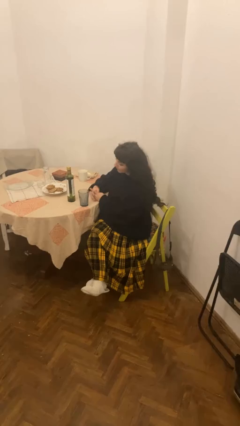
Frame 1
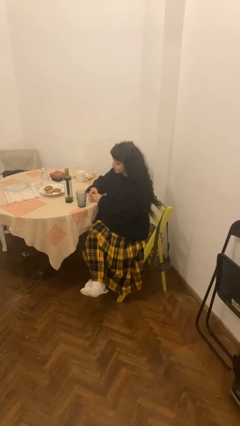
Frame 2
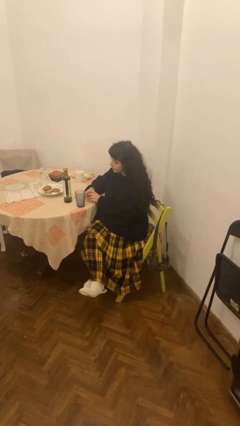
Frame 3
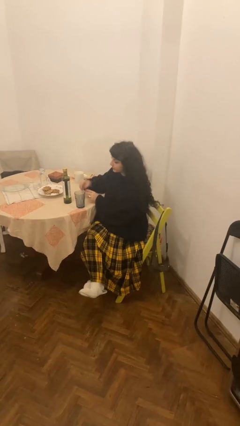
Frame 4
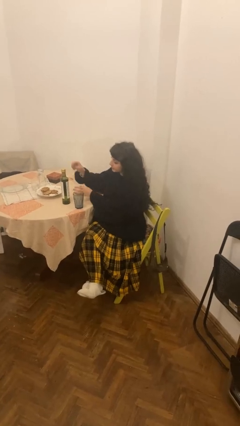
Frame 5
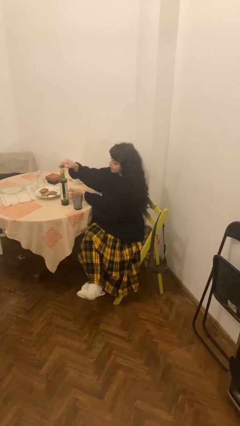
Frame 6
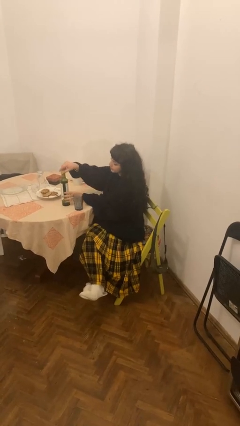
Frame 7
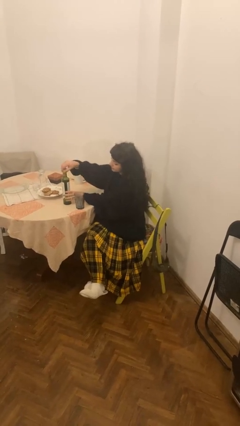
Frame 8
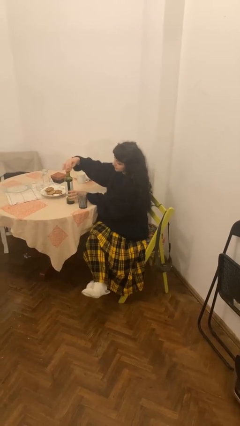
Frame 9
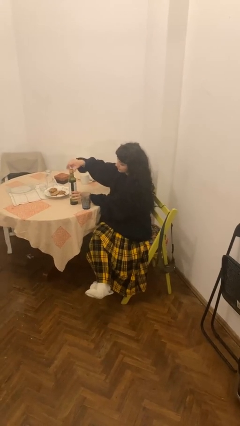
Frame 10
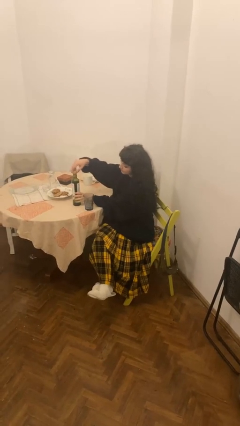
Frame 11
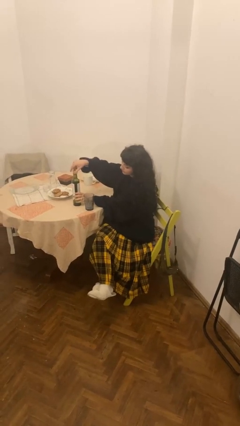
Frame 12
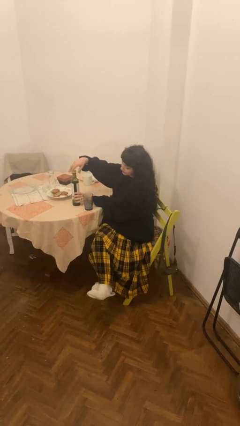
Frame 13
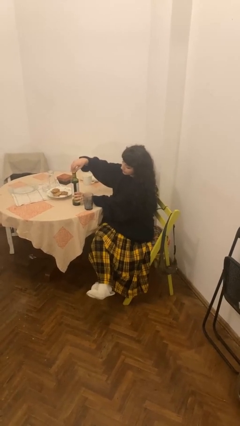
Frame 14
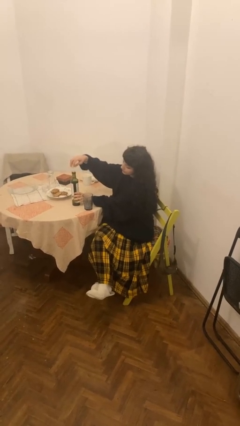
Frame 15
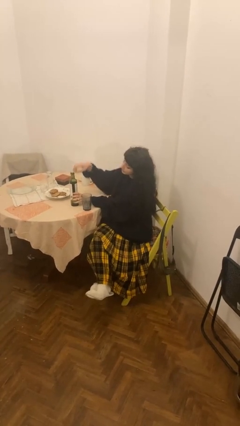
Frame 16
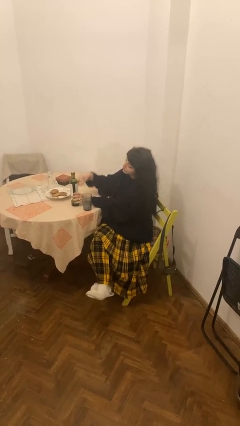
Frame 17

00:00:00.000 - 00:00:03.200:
person unscrews lid from bottle

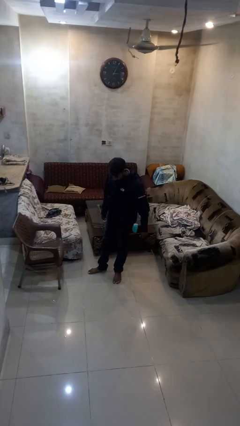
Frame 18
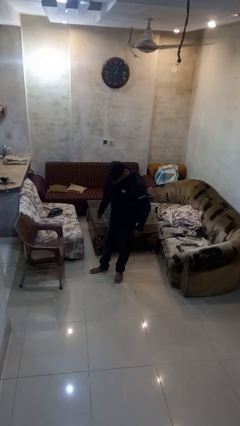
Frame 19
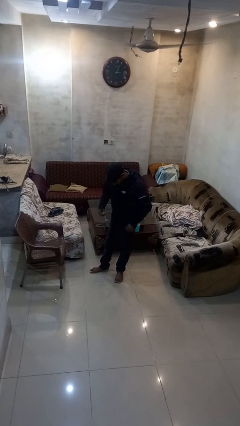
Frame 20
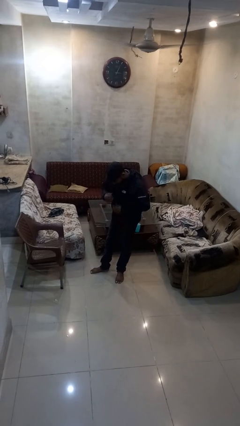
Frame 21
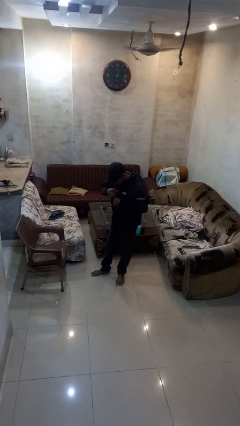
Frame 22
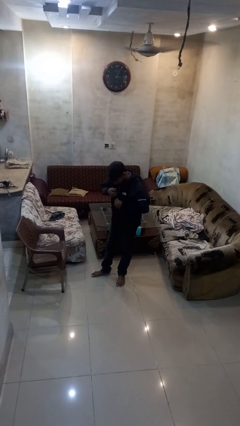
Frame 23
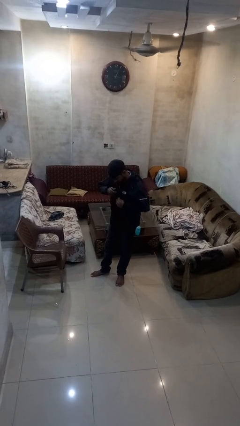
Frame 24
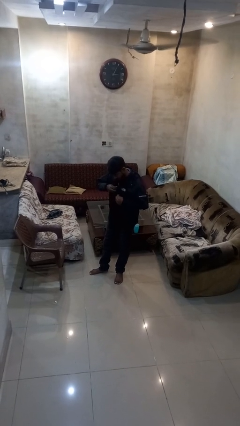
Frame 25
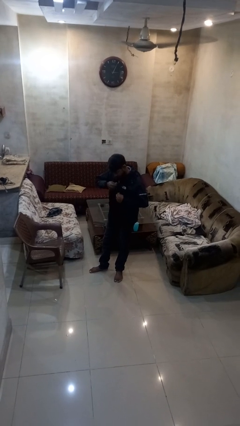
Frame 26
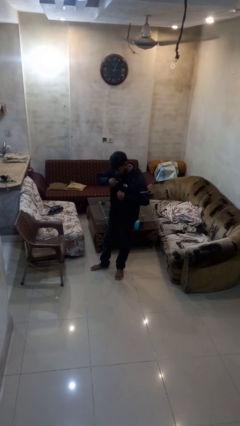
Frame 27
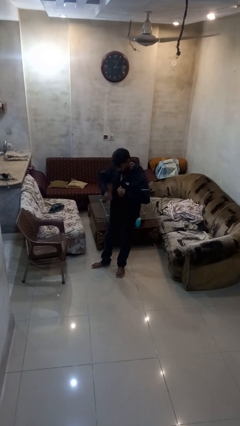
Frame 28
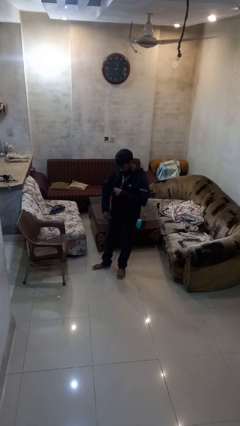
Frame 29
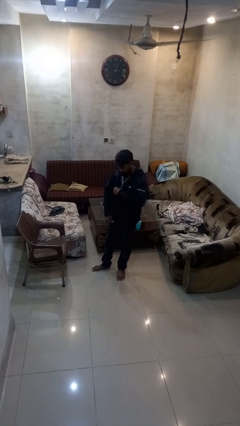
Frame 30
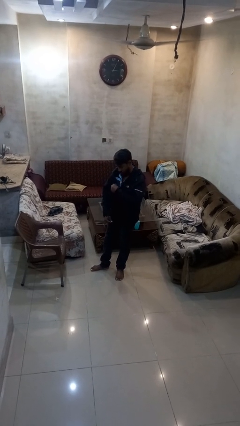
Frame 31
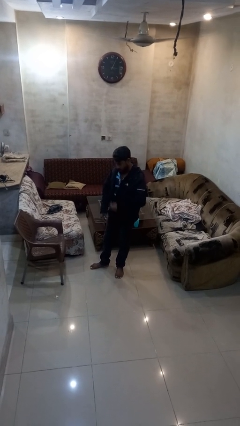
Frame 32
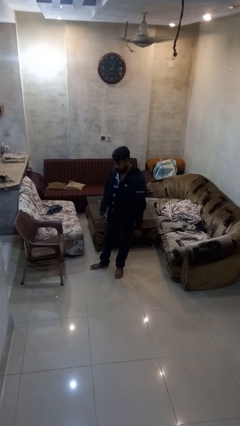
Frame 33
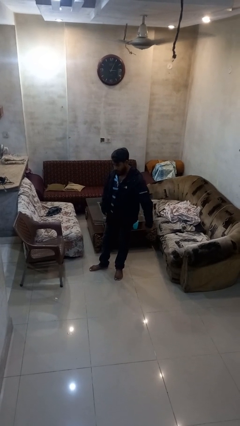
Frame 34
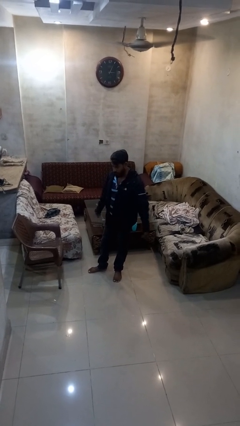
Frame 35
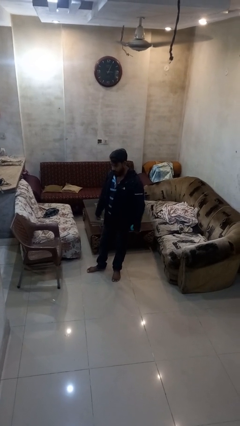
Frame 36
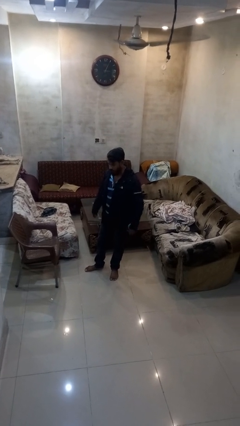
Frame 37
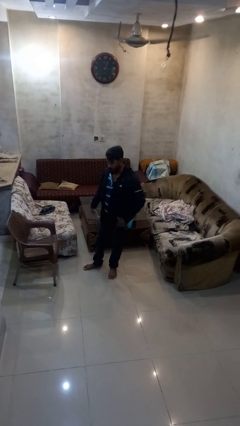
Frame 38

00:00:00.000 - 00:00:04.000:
person unzips jacket

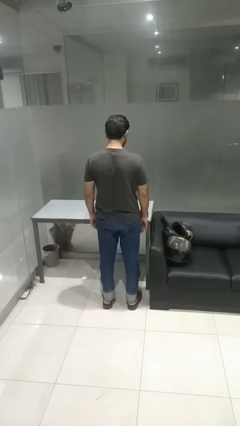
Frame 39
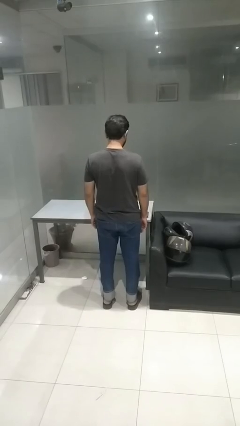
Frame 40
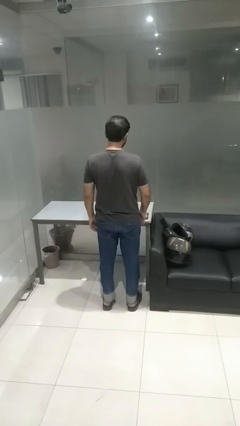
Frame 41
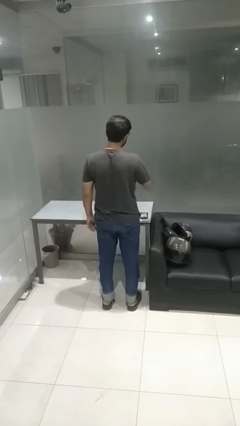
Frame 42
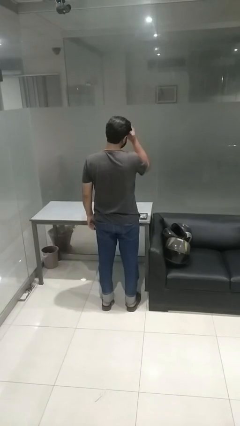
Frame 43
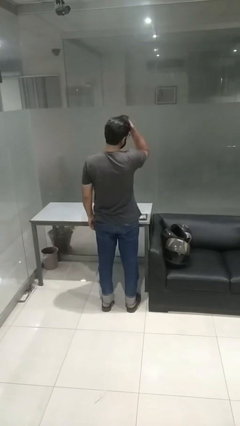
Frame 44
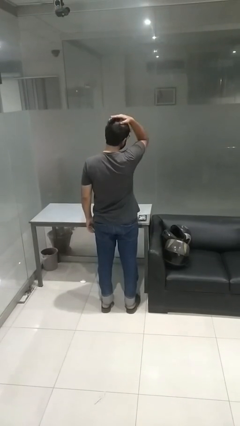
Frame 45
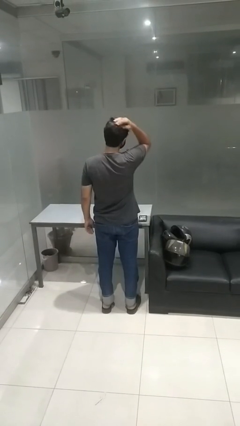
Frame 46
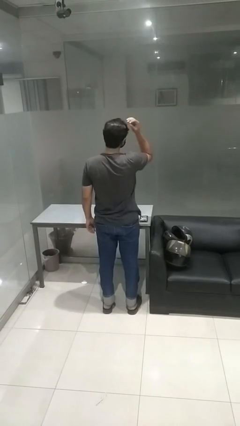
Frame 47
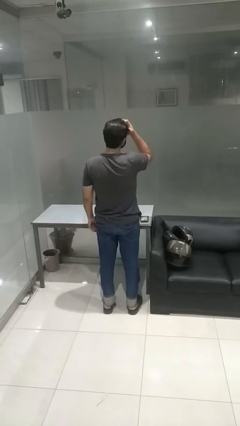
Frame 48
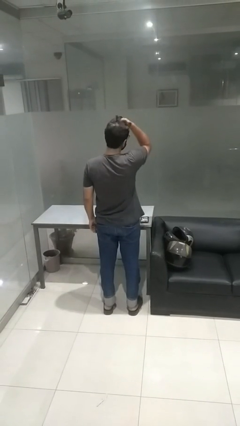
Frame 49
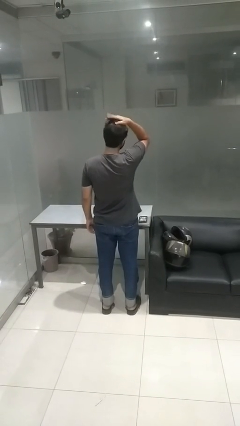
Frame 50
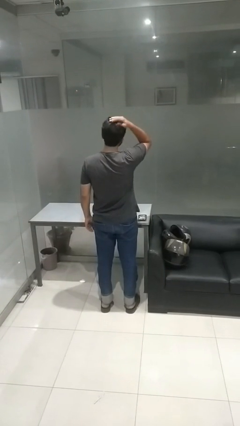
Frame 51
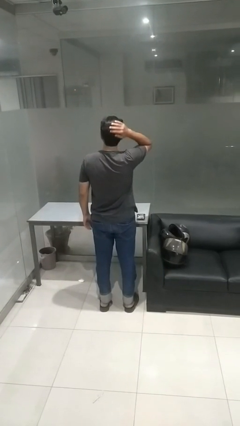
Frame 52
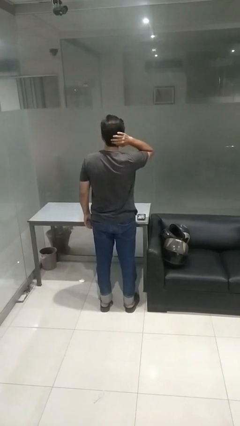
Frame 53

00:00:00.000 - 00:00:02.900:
person strokes hair

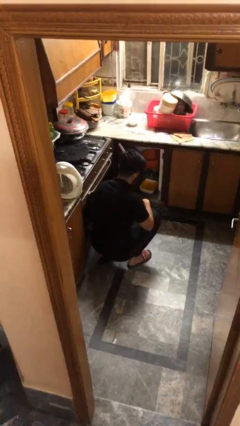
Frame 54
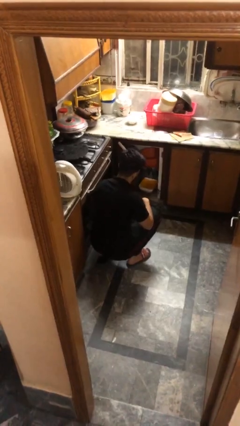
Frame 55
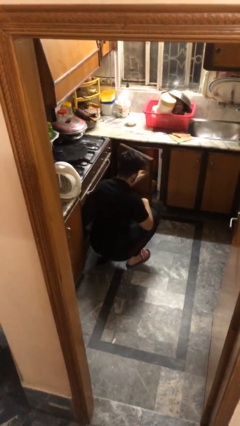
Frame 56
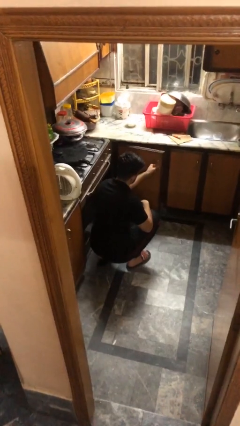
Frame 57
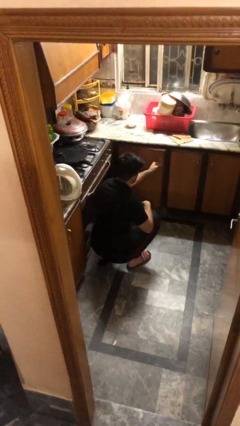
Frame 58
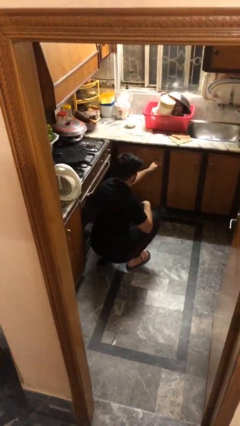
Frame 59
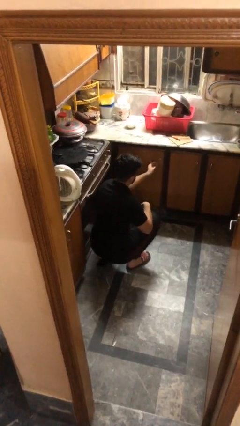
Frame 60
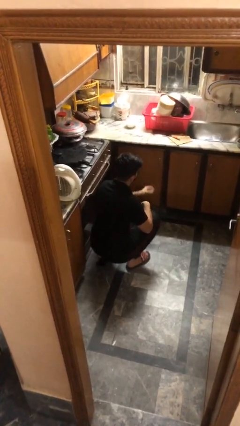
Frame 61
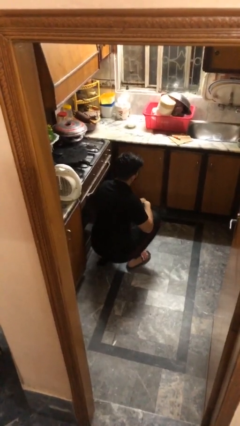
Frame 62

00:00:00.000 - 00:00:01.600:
person closes kitchen drawer

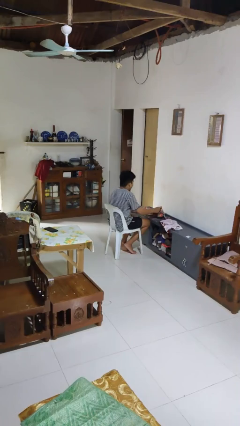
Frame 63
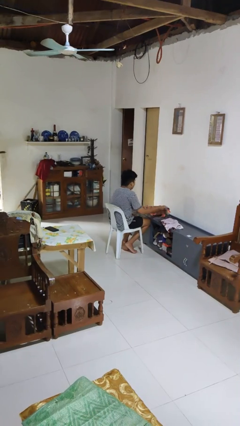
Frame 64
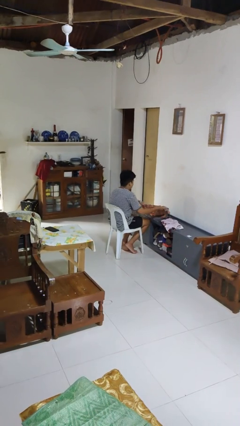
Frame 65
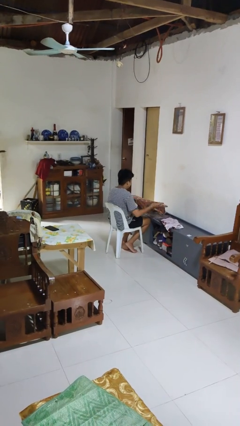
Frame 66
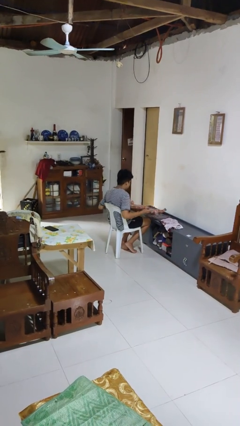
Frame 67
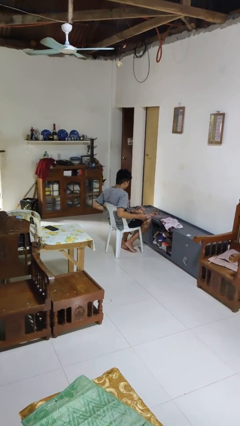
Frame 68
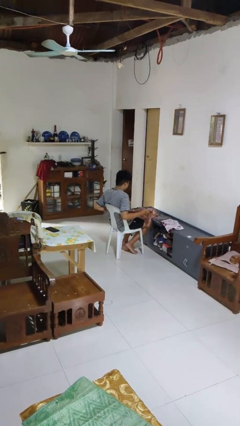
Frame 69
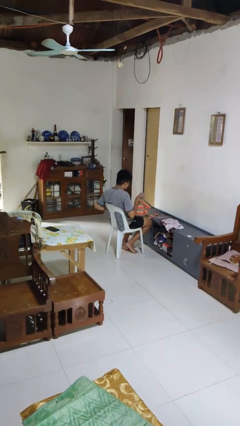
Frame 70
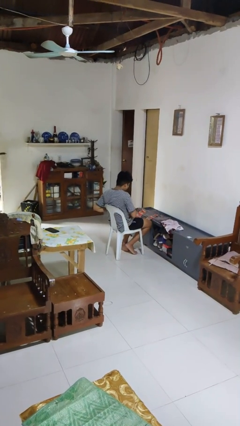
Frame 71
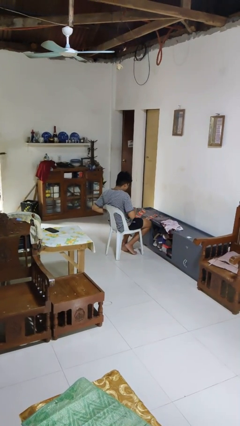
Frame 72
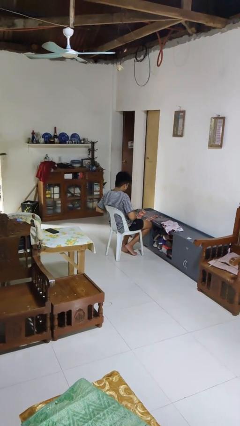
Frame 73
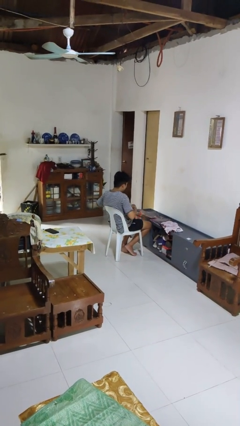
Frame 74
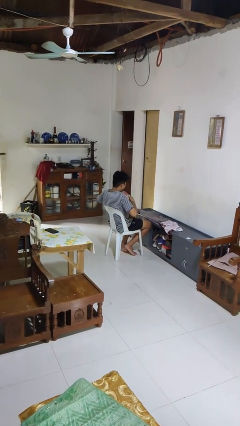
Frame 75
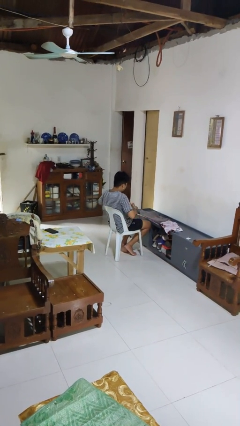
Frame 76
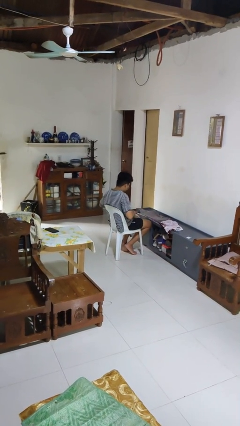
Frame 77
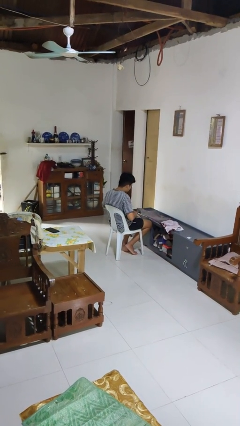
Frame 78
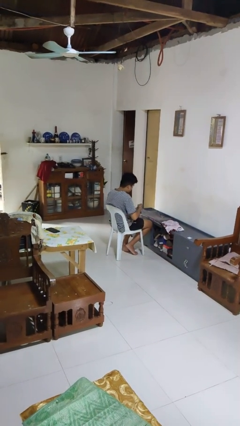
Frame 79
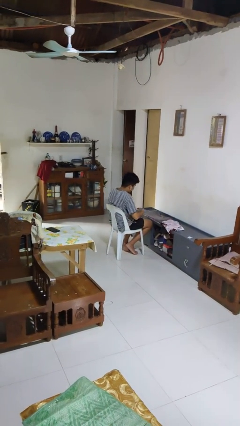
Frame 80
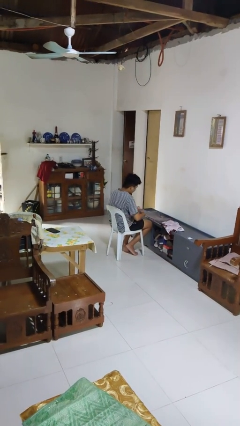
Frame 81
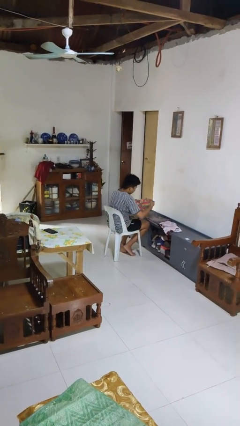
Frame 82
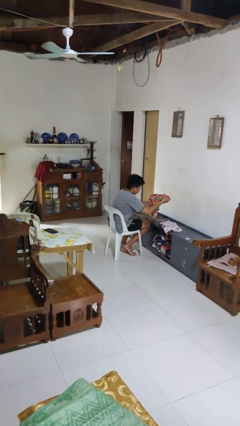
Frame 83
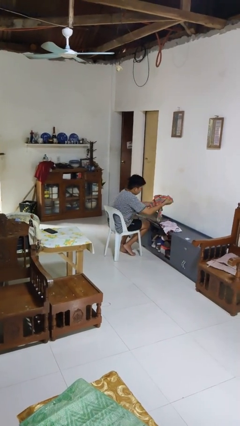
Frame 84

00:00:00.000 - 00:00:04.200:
person folds shirt

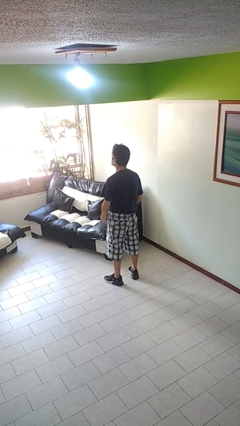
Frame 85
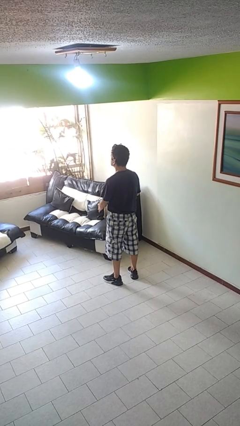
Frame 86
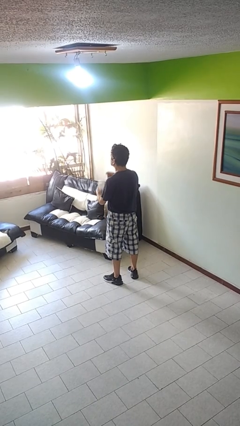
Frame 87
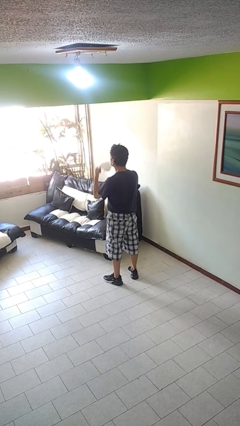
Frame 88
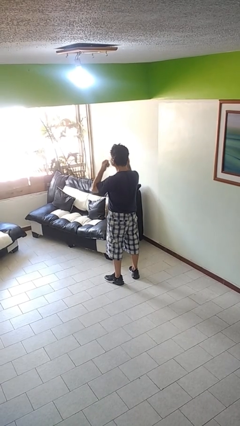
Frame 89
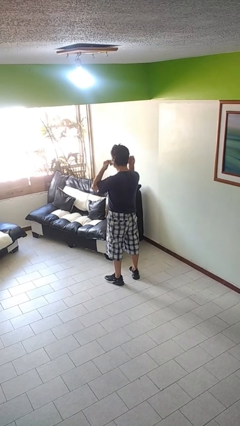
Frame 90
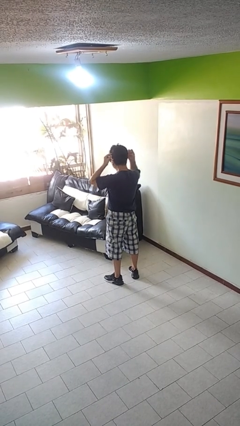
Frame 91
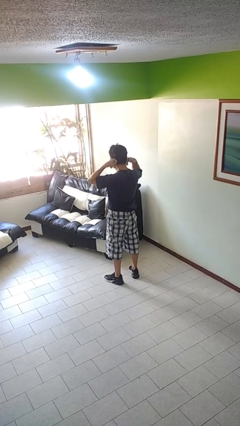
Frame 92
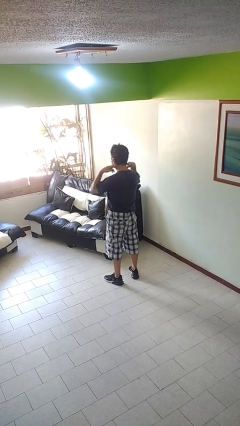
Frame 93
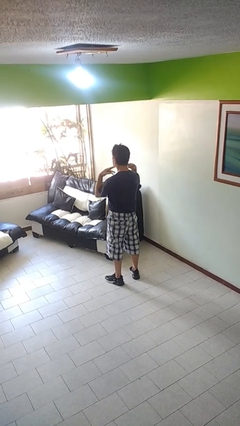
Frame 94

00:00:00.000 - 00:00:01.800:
person puts on facemask
